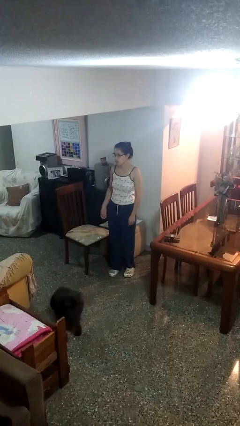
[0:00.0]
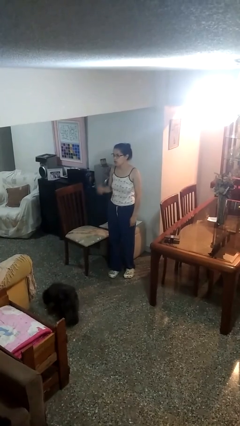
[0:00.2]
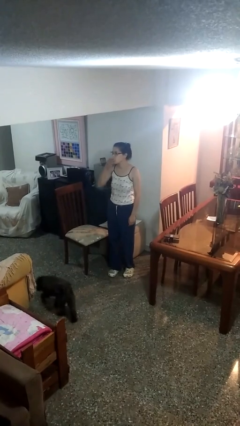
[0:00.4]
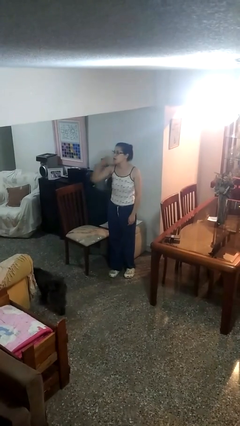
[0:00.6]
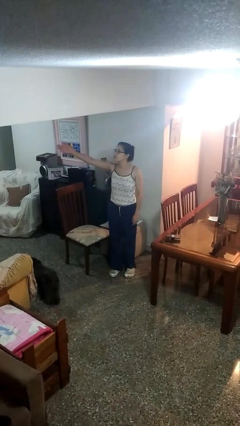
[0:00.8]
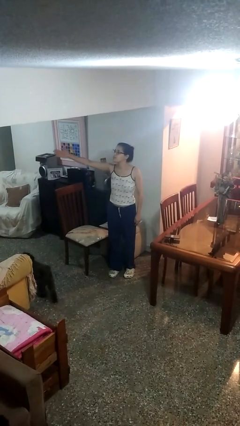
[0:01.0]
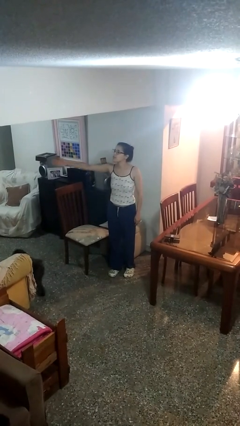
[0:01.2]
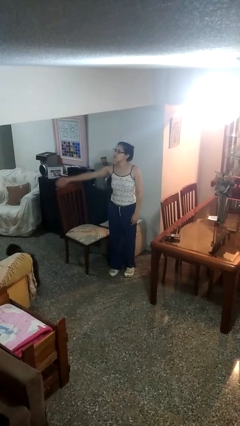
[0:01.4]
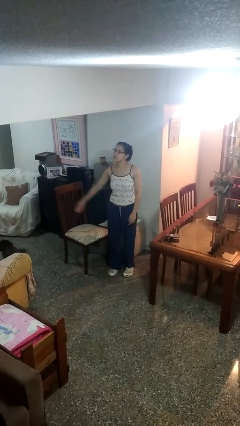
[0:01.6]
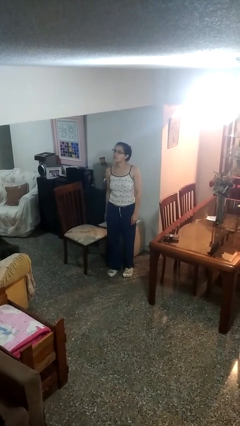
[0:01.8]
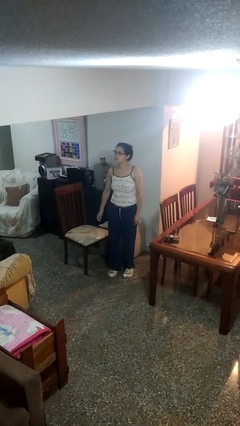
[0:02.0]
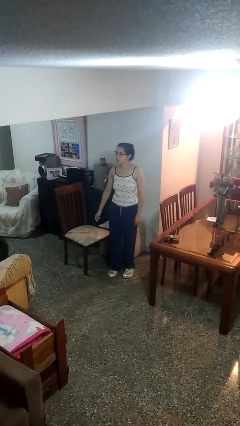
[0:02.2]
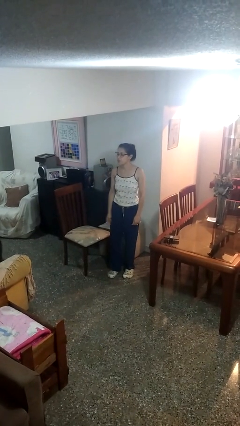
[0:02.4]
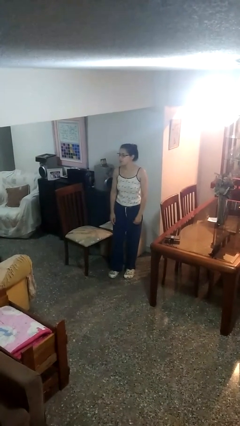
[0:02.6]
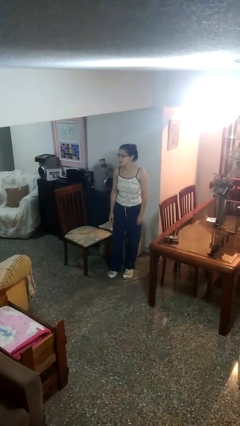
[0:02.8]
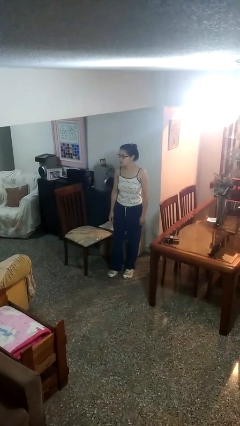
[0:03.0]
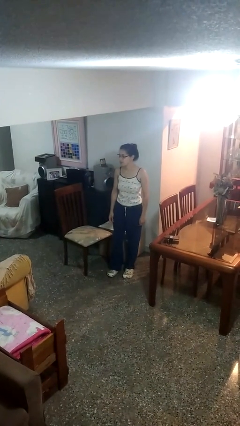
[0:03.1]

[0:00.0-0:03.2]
person gestures blow kiss

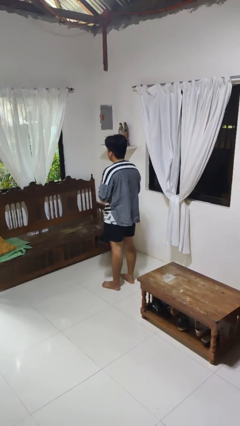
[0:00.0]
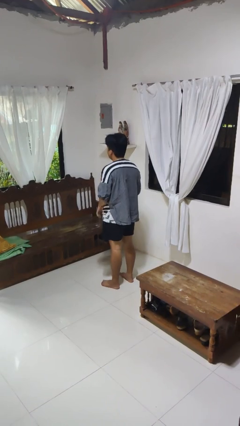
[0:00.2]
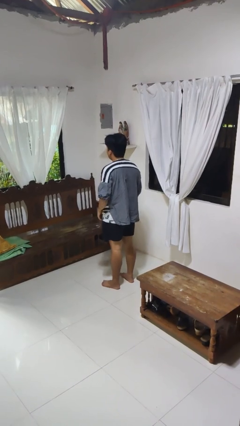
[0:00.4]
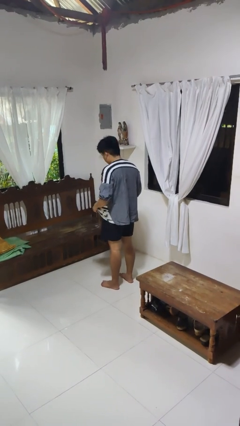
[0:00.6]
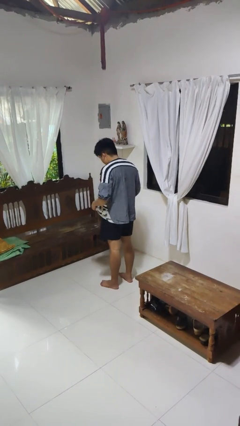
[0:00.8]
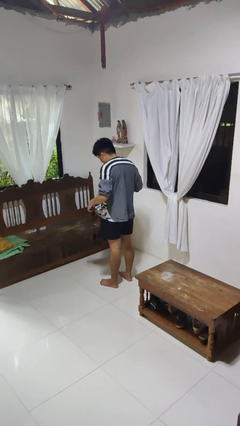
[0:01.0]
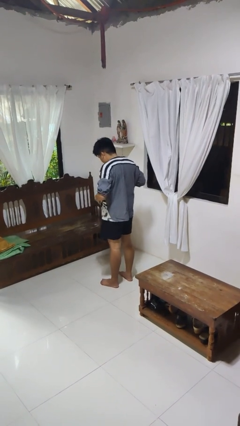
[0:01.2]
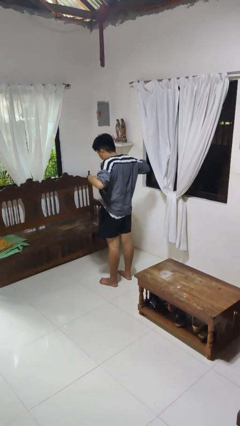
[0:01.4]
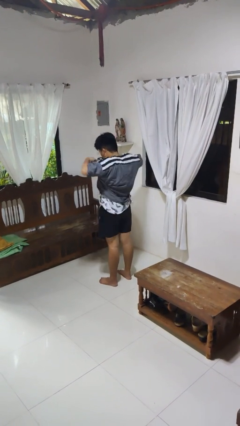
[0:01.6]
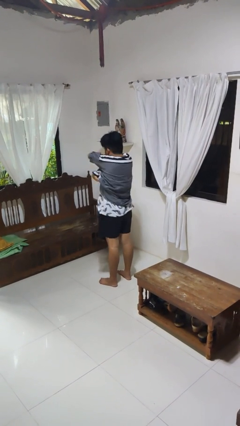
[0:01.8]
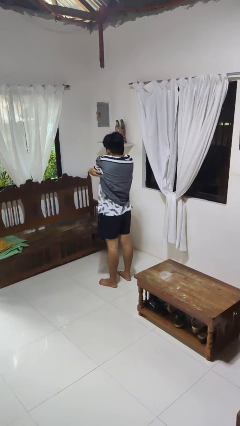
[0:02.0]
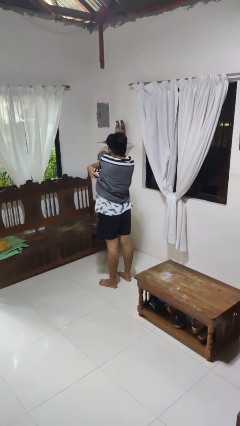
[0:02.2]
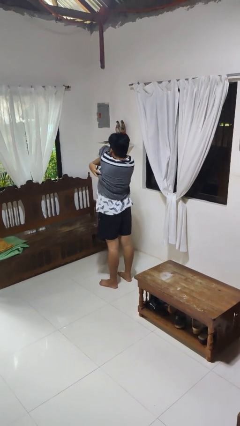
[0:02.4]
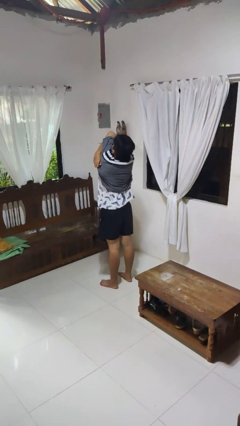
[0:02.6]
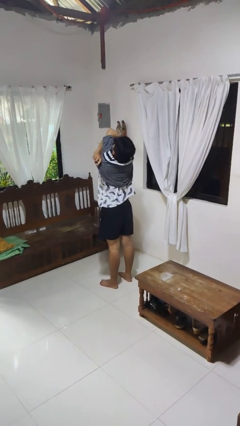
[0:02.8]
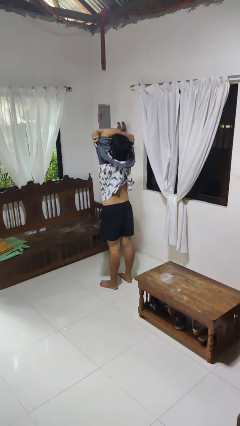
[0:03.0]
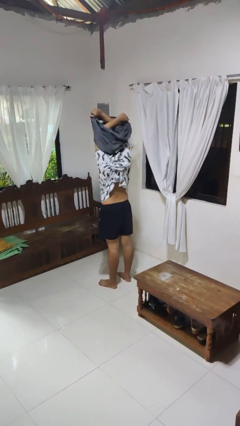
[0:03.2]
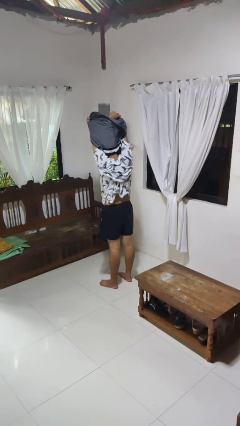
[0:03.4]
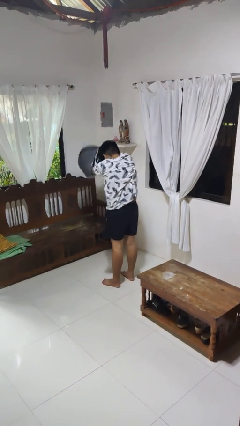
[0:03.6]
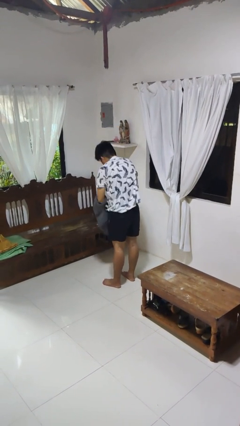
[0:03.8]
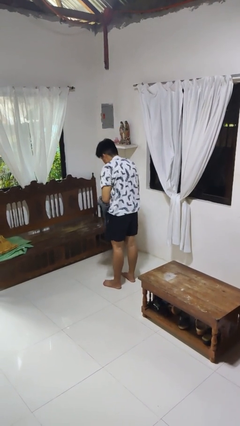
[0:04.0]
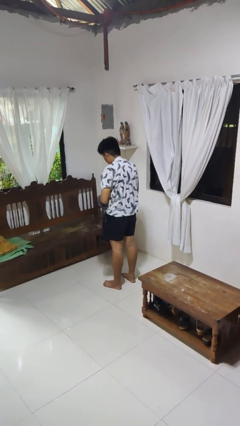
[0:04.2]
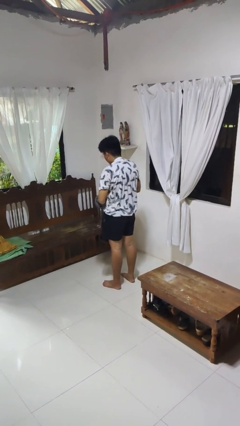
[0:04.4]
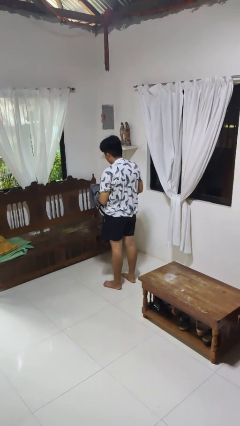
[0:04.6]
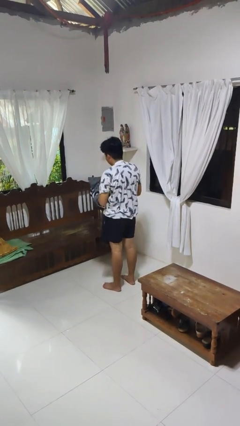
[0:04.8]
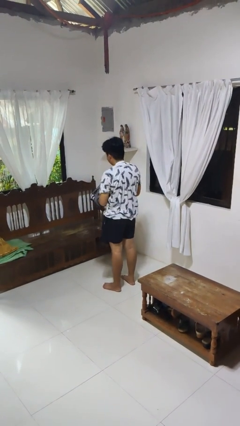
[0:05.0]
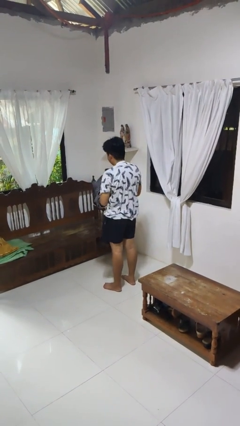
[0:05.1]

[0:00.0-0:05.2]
person takes off shirt

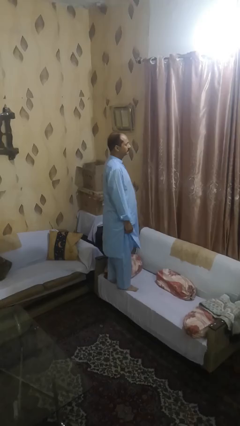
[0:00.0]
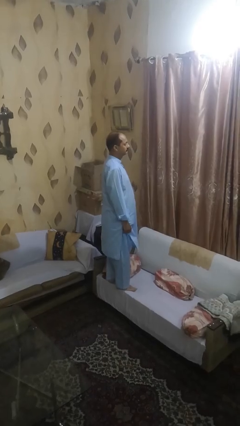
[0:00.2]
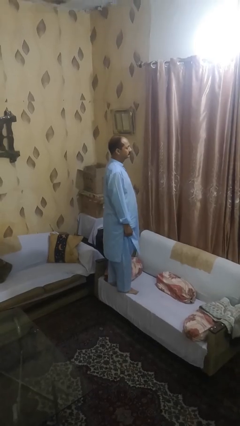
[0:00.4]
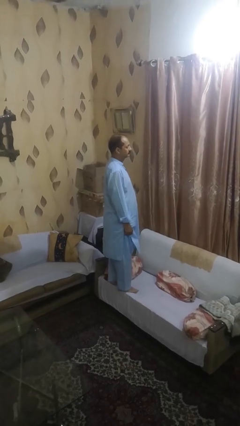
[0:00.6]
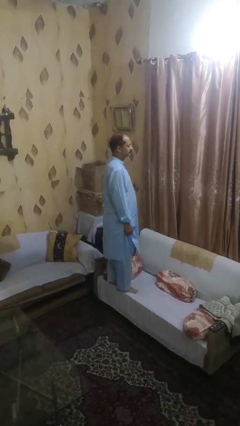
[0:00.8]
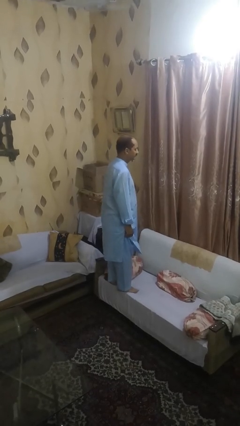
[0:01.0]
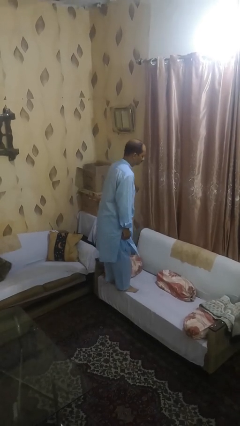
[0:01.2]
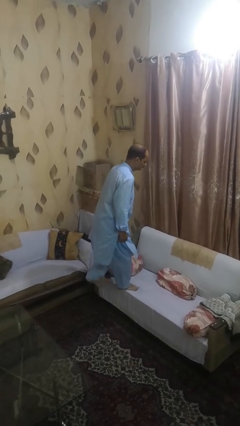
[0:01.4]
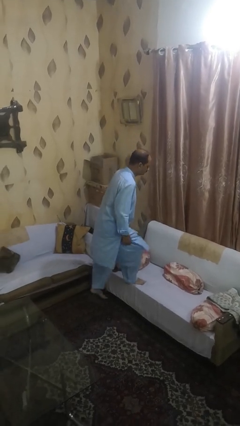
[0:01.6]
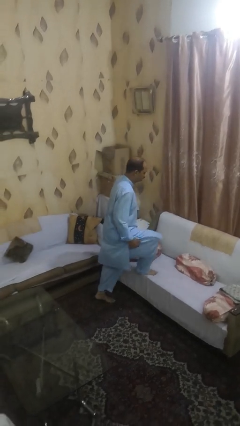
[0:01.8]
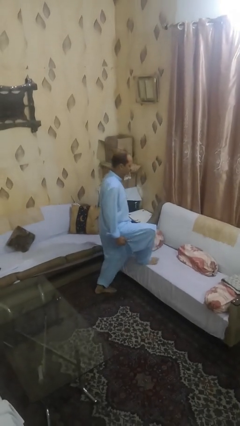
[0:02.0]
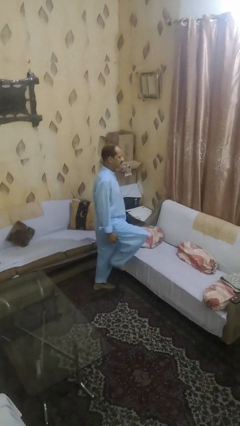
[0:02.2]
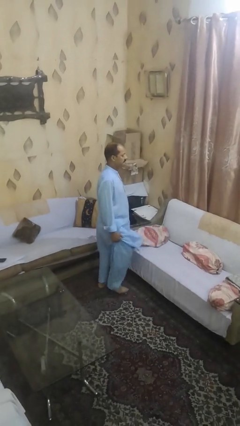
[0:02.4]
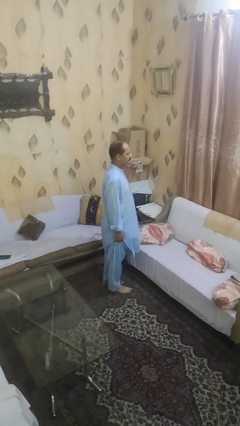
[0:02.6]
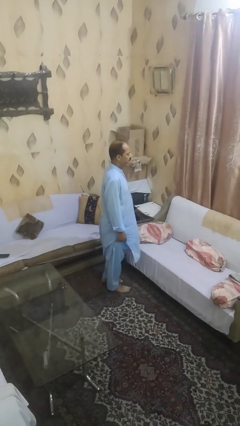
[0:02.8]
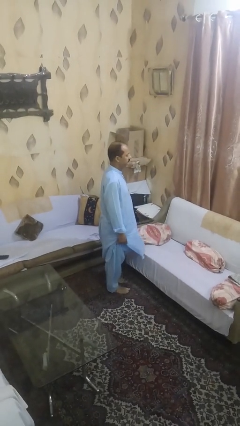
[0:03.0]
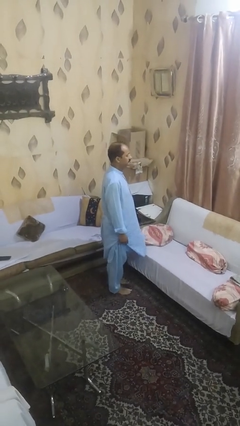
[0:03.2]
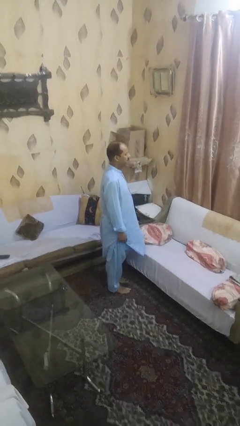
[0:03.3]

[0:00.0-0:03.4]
person climbs off chair

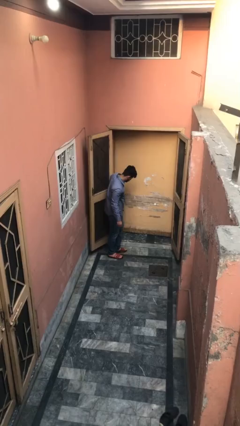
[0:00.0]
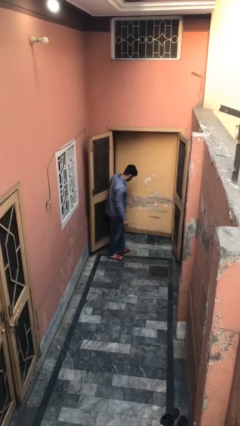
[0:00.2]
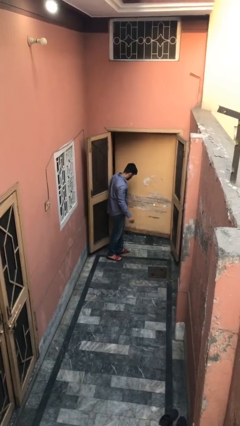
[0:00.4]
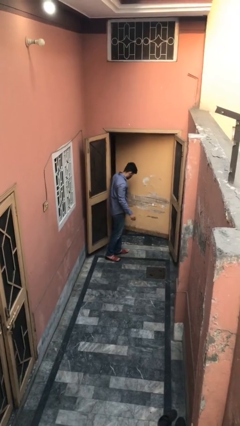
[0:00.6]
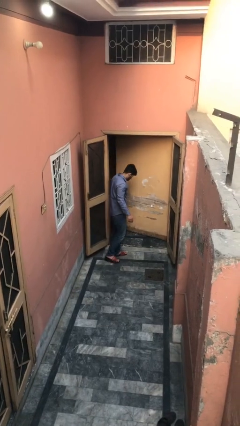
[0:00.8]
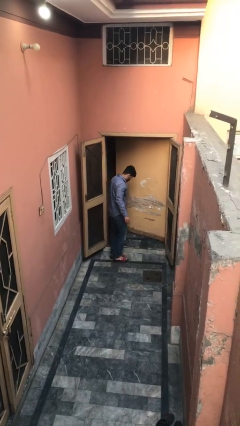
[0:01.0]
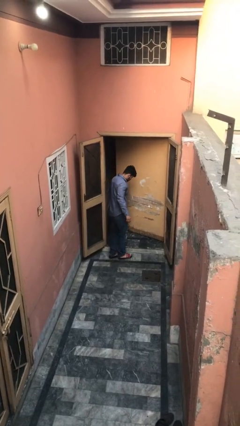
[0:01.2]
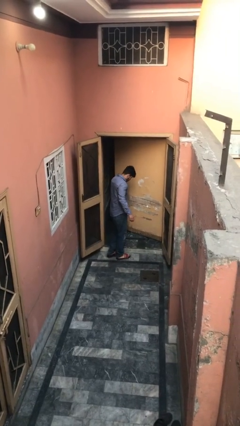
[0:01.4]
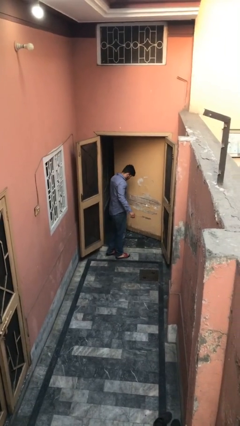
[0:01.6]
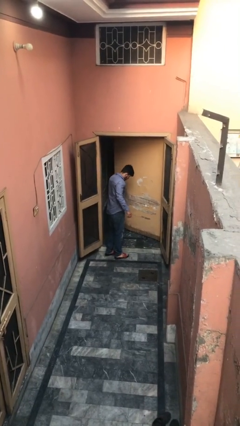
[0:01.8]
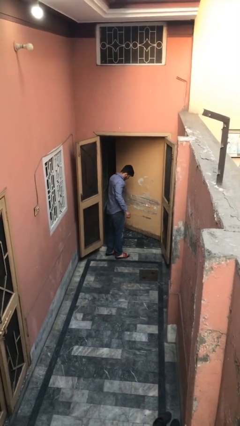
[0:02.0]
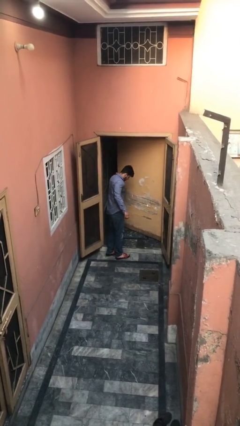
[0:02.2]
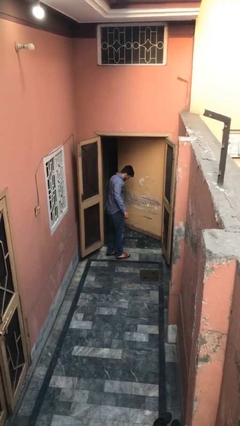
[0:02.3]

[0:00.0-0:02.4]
person opens facility door

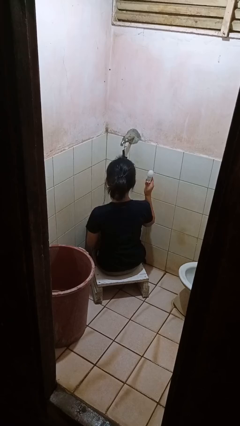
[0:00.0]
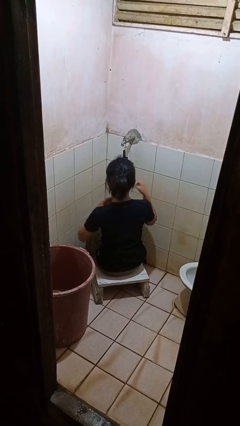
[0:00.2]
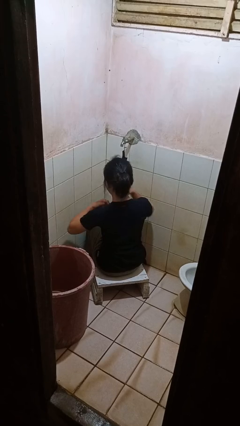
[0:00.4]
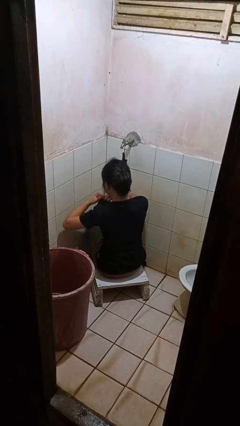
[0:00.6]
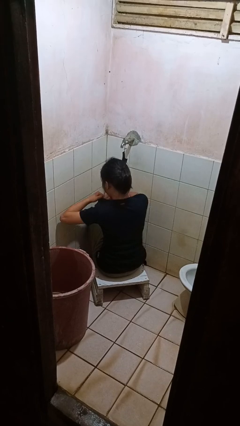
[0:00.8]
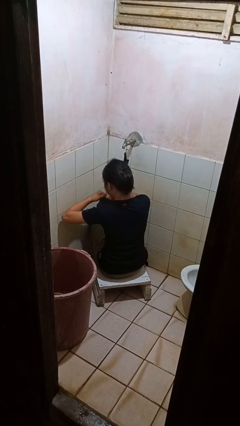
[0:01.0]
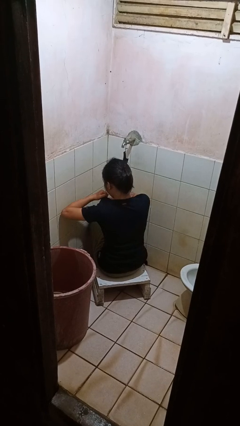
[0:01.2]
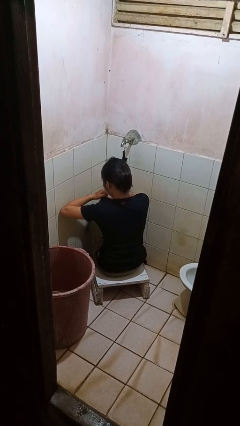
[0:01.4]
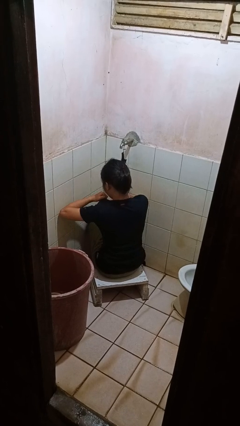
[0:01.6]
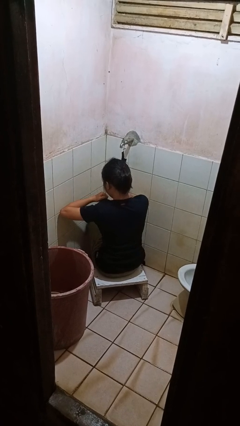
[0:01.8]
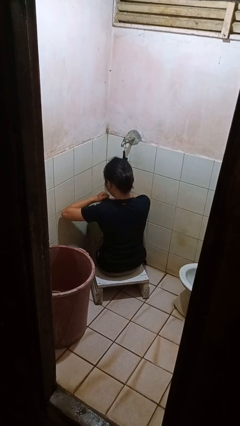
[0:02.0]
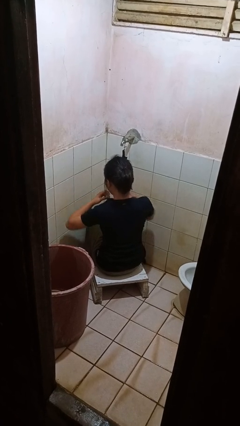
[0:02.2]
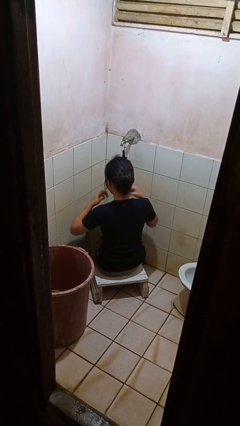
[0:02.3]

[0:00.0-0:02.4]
person applies deodorant

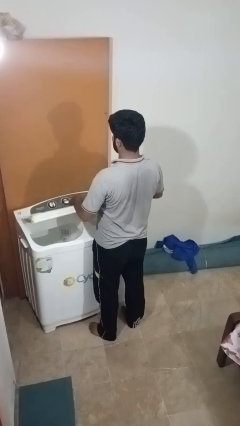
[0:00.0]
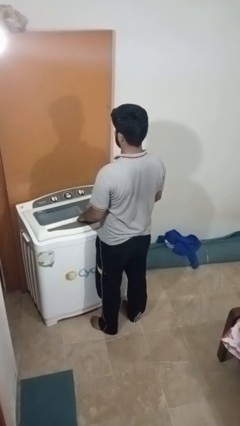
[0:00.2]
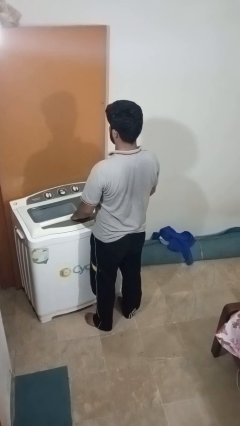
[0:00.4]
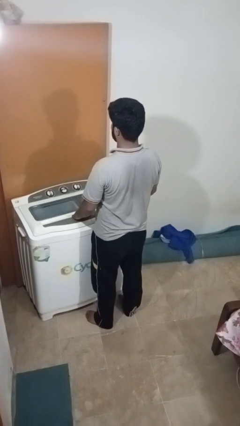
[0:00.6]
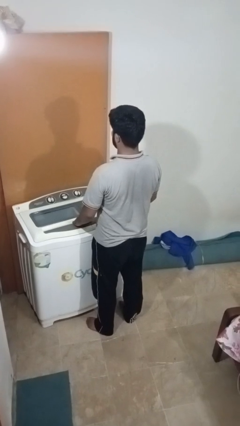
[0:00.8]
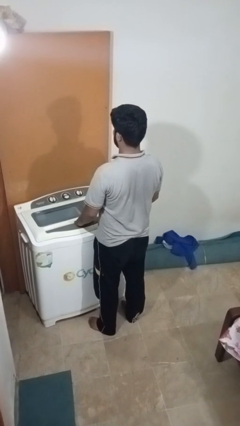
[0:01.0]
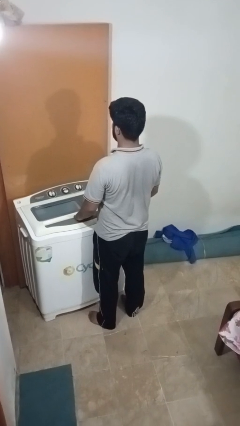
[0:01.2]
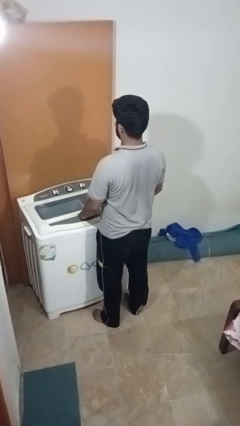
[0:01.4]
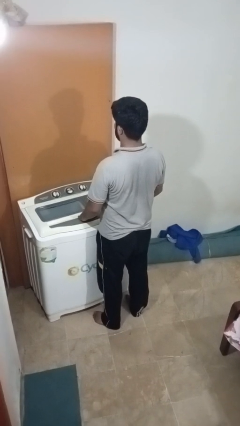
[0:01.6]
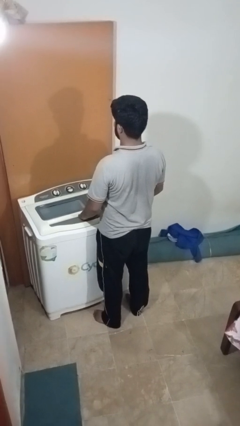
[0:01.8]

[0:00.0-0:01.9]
person closes clothes washer
